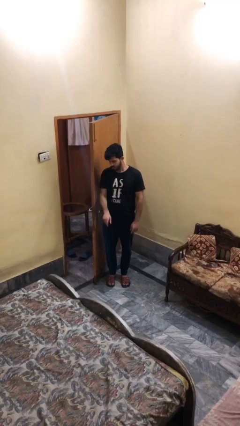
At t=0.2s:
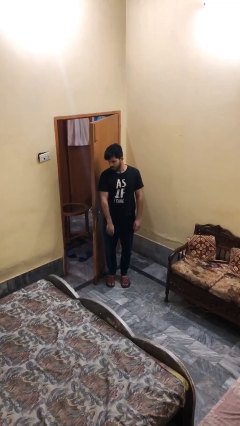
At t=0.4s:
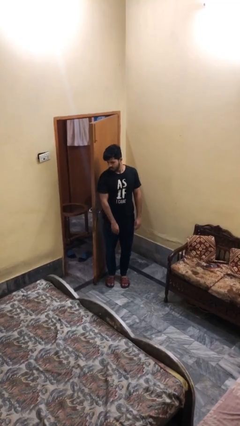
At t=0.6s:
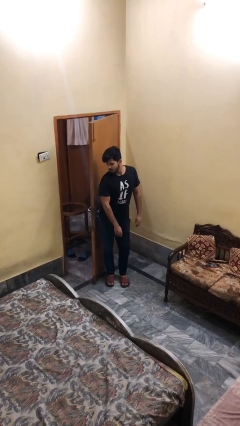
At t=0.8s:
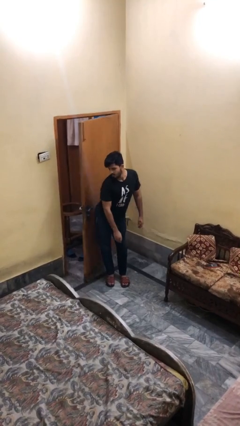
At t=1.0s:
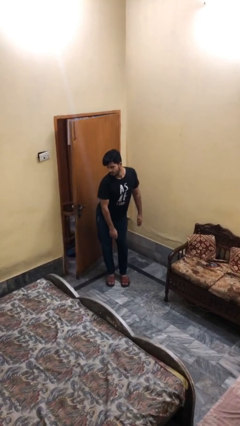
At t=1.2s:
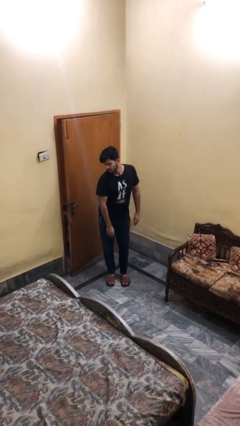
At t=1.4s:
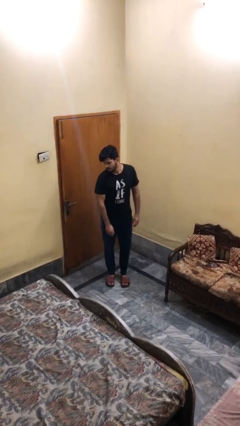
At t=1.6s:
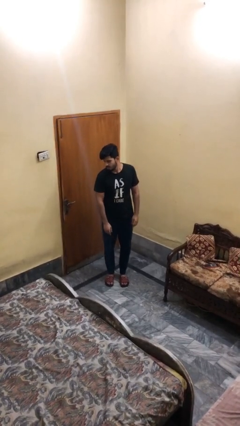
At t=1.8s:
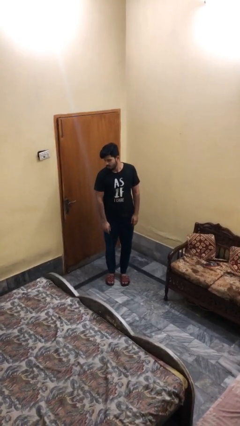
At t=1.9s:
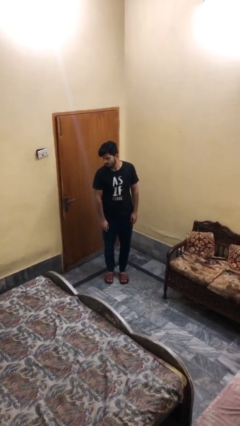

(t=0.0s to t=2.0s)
person closes door with hip

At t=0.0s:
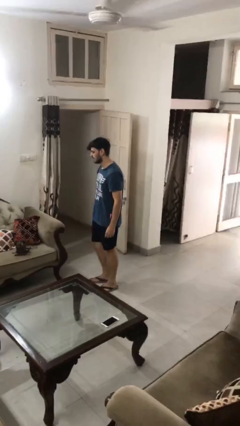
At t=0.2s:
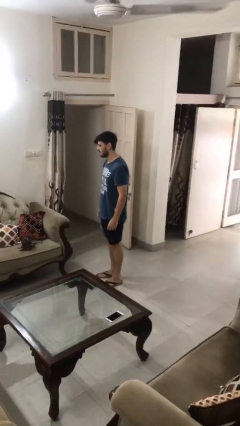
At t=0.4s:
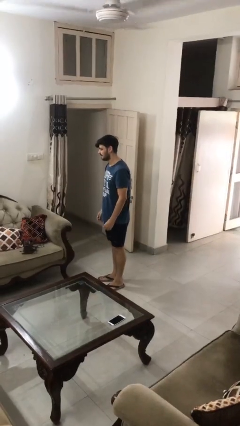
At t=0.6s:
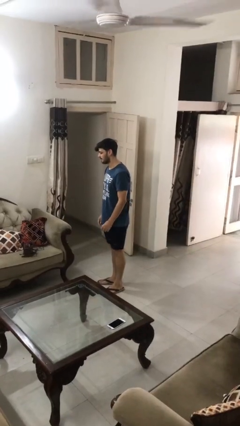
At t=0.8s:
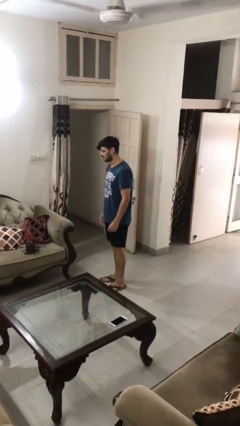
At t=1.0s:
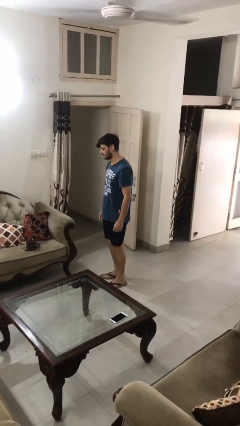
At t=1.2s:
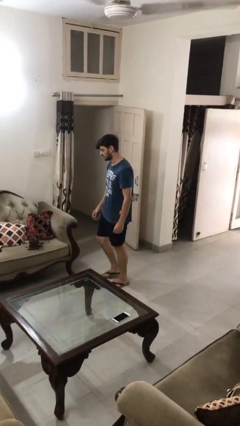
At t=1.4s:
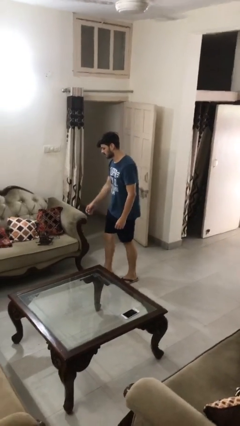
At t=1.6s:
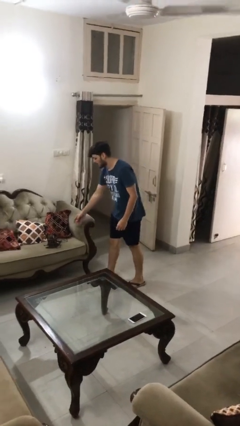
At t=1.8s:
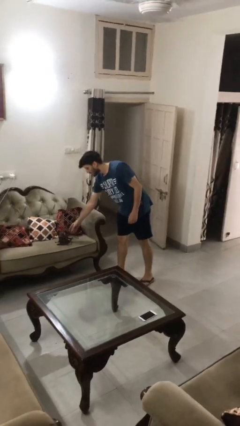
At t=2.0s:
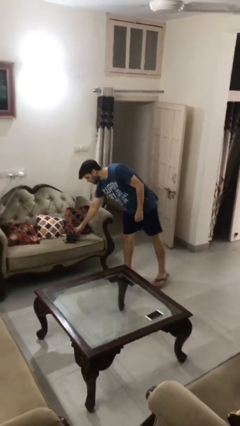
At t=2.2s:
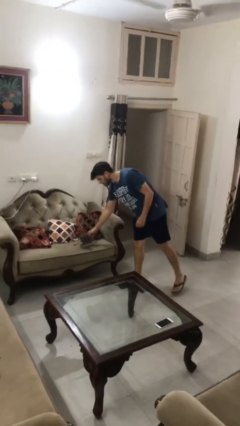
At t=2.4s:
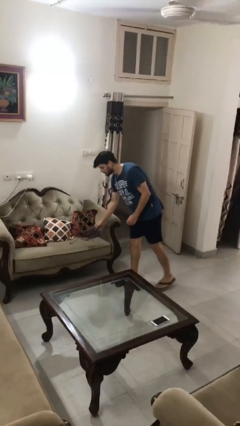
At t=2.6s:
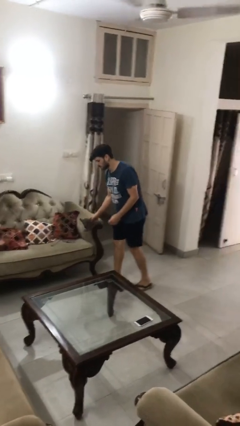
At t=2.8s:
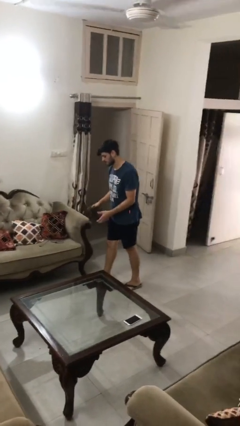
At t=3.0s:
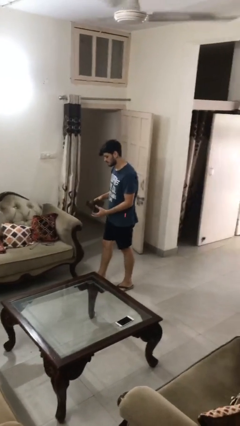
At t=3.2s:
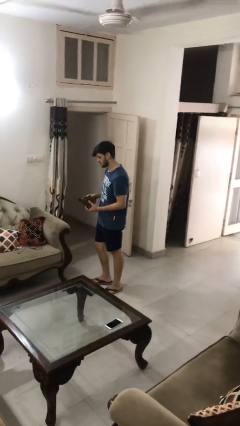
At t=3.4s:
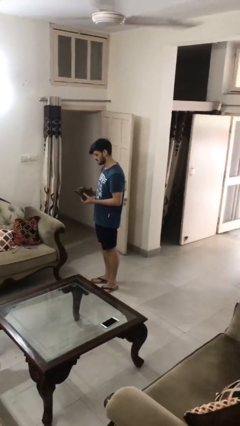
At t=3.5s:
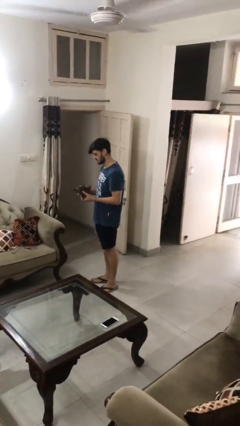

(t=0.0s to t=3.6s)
person picks up object from couch

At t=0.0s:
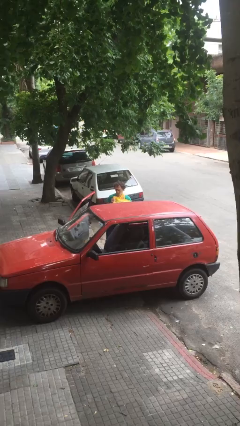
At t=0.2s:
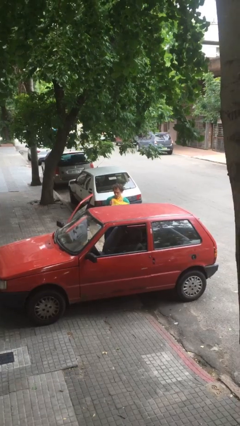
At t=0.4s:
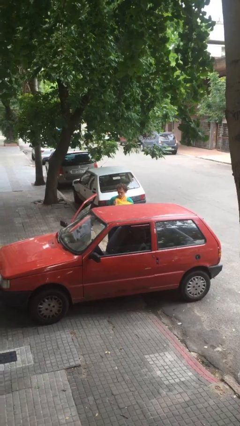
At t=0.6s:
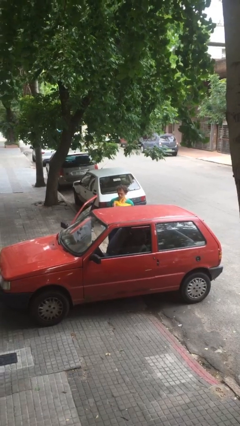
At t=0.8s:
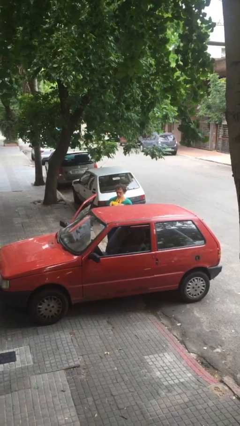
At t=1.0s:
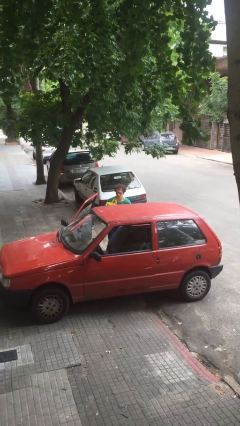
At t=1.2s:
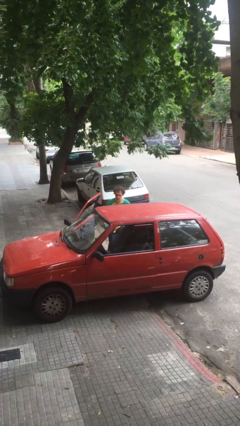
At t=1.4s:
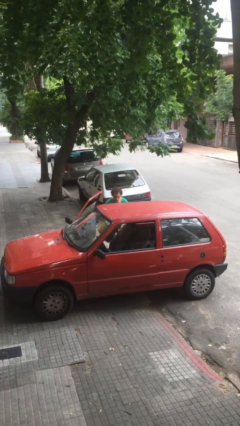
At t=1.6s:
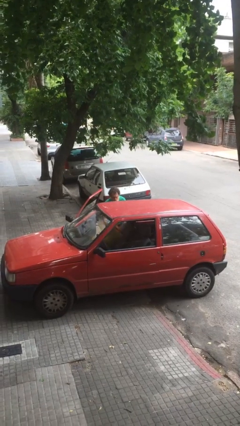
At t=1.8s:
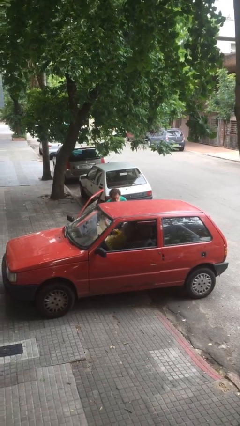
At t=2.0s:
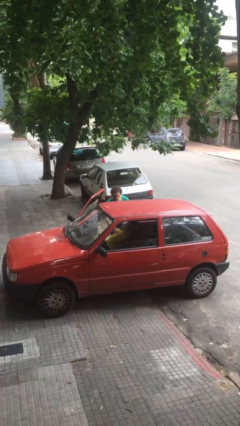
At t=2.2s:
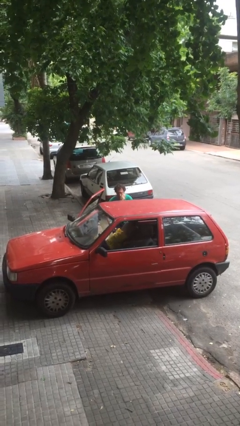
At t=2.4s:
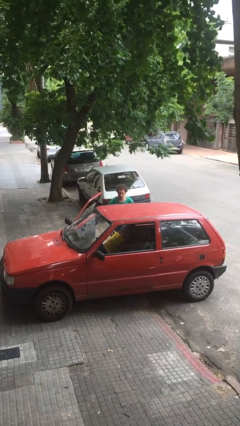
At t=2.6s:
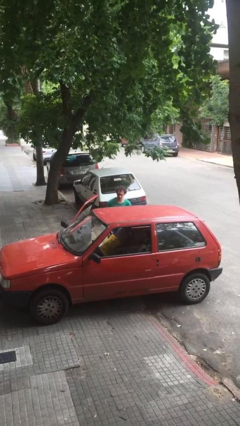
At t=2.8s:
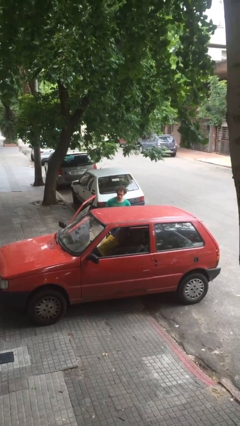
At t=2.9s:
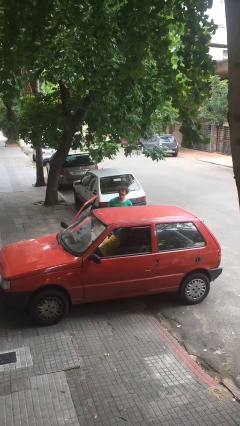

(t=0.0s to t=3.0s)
person loads car

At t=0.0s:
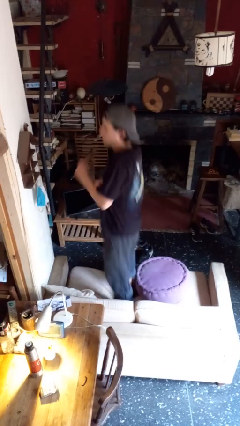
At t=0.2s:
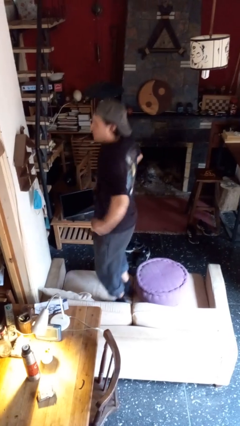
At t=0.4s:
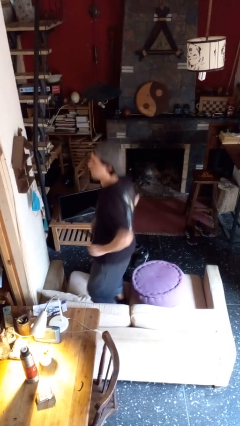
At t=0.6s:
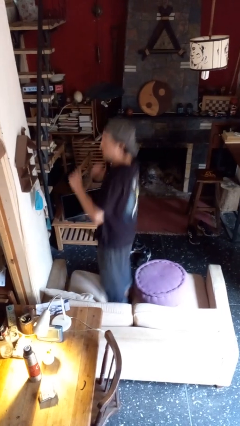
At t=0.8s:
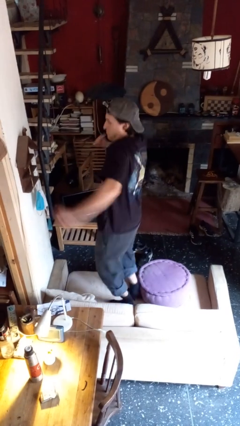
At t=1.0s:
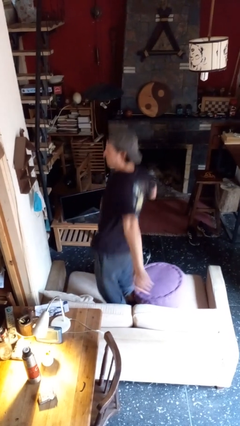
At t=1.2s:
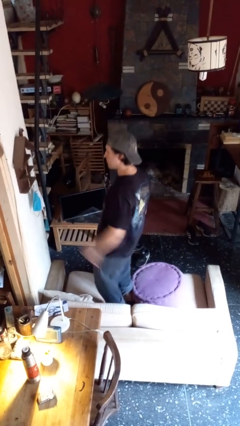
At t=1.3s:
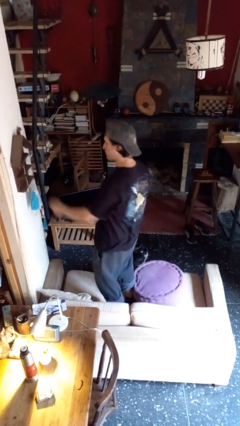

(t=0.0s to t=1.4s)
person jumps on couch

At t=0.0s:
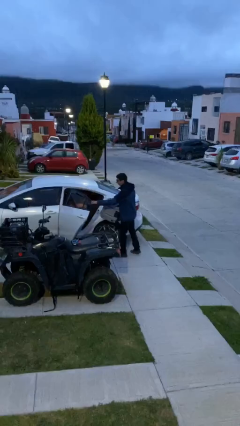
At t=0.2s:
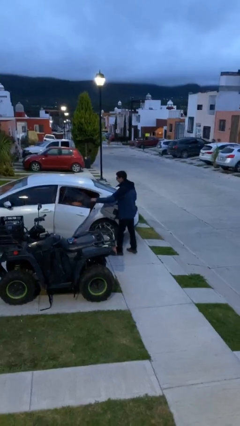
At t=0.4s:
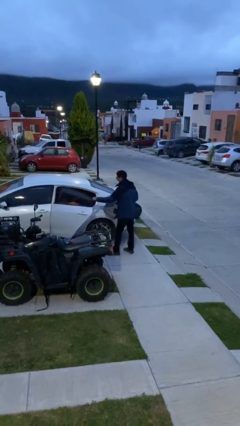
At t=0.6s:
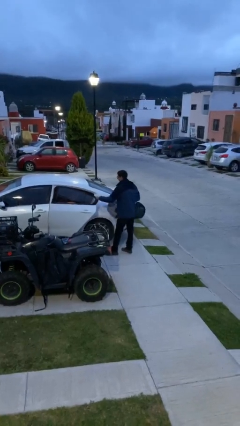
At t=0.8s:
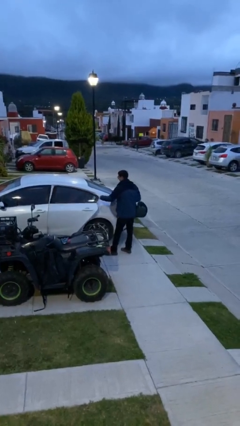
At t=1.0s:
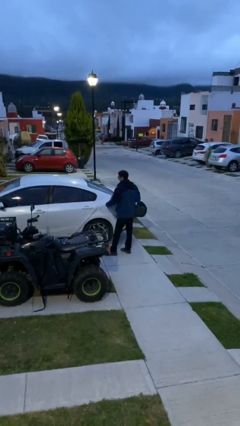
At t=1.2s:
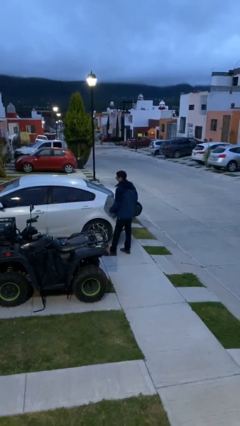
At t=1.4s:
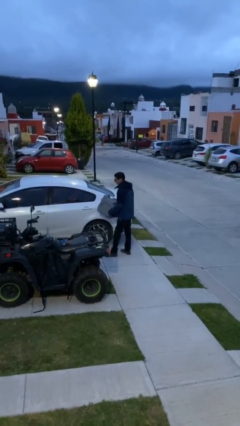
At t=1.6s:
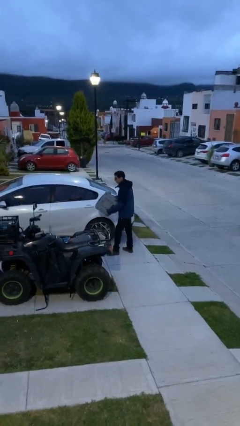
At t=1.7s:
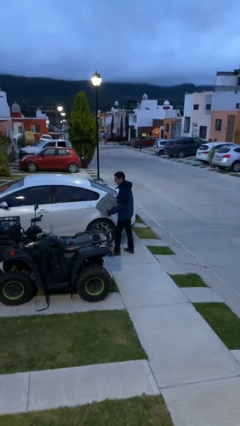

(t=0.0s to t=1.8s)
person closes car door

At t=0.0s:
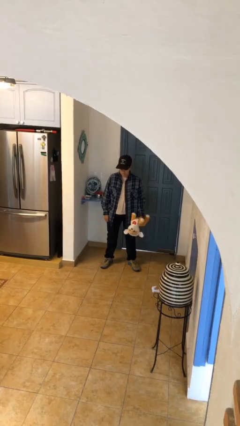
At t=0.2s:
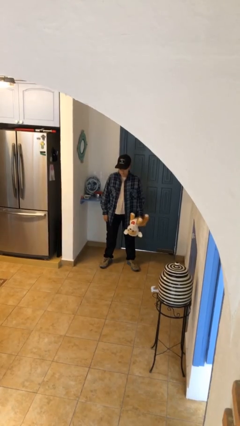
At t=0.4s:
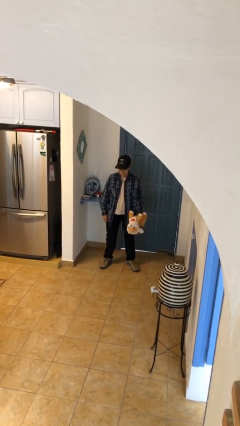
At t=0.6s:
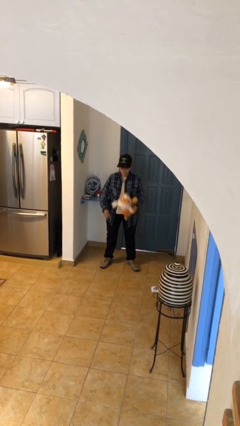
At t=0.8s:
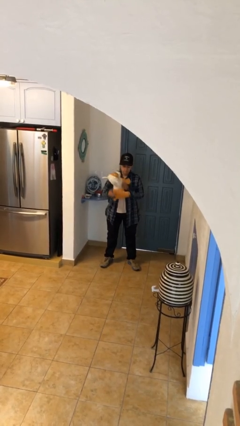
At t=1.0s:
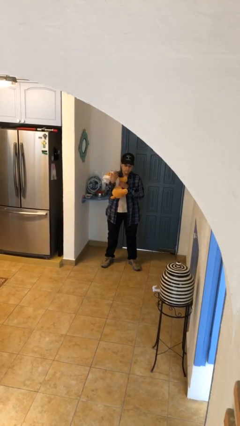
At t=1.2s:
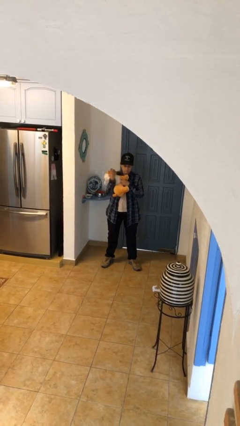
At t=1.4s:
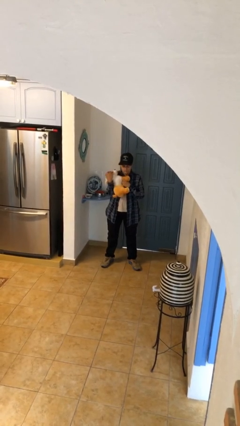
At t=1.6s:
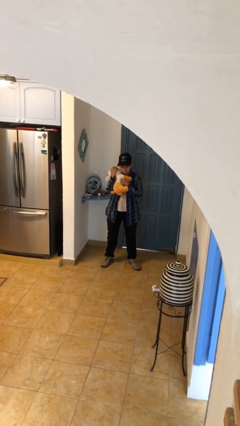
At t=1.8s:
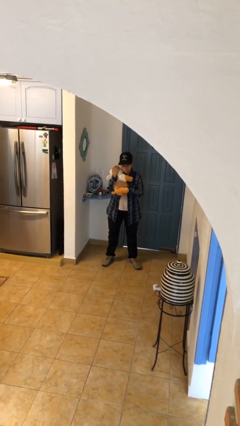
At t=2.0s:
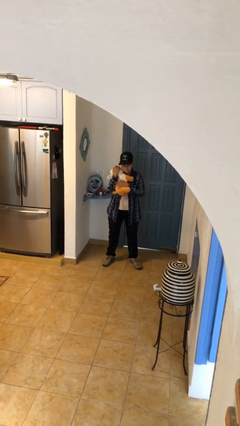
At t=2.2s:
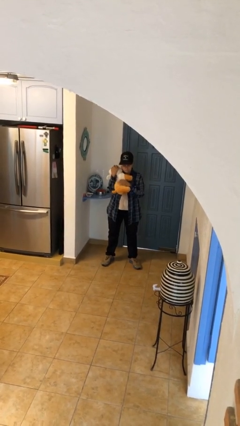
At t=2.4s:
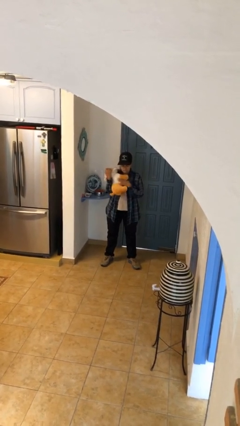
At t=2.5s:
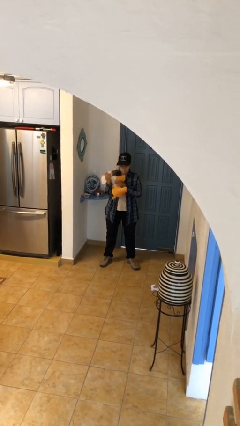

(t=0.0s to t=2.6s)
person hugs stuffed animal

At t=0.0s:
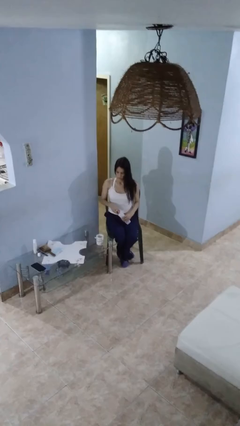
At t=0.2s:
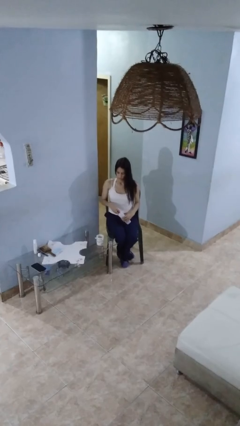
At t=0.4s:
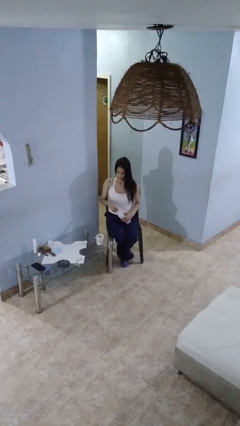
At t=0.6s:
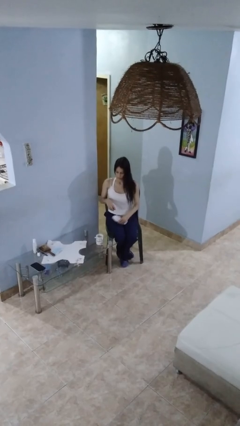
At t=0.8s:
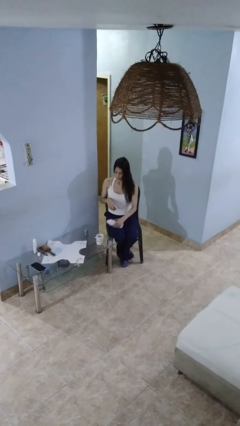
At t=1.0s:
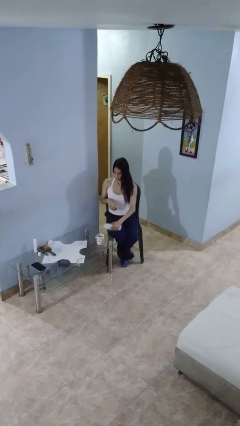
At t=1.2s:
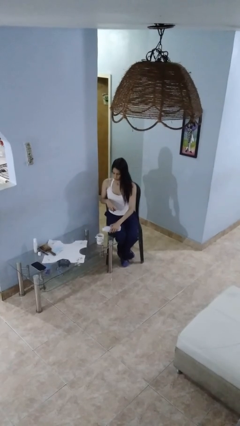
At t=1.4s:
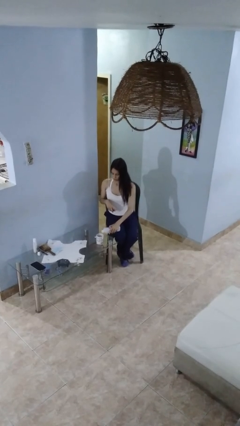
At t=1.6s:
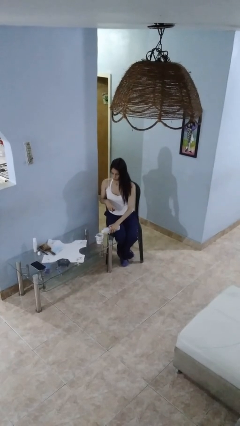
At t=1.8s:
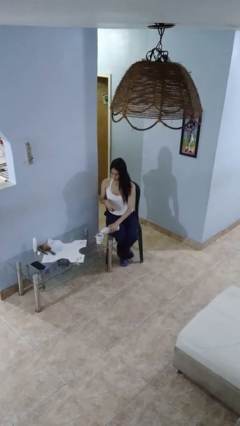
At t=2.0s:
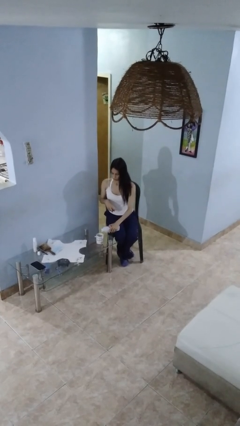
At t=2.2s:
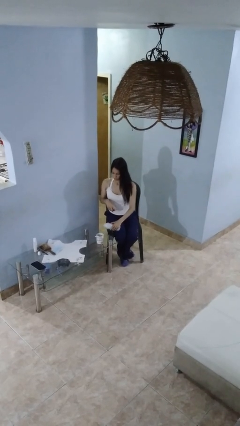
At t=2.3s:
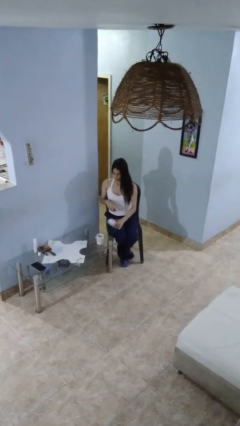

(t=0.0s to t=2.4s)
person pours liquid into cup

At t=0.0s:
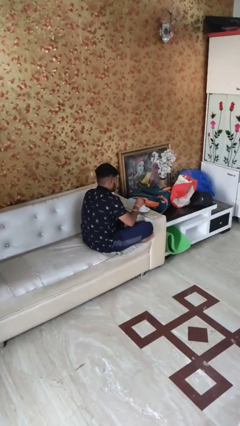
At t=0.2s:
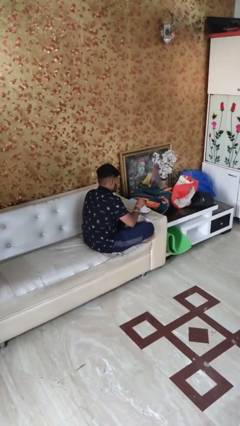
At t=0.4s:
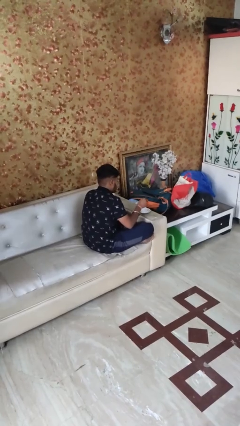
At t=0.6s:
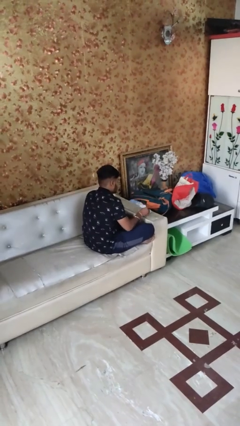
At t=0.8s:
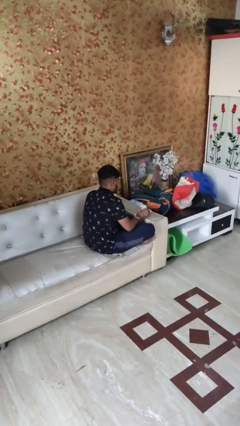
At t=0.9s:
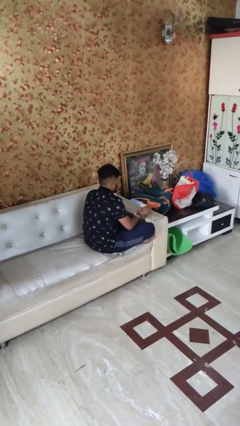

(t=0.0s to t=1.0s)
person stirs mug
